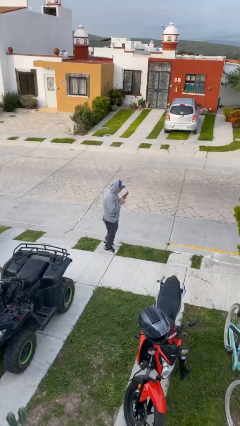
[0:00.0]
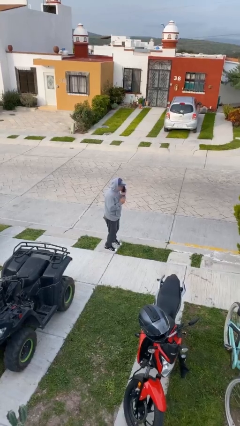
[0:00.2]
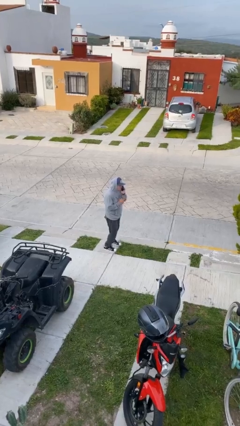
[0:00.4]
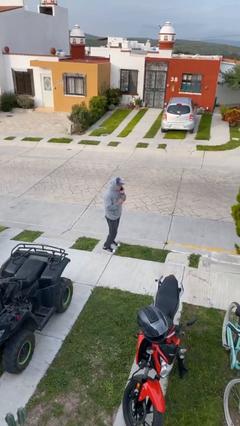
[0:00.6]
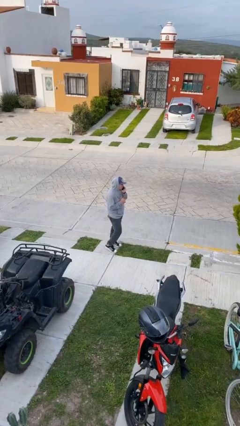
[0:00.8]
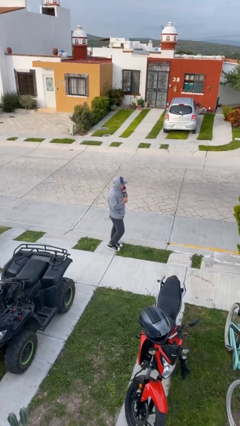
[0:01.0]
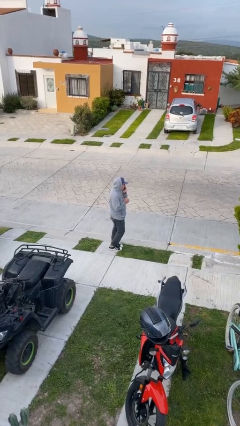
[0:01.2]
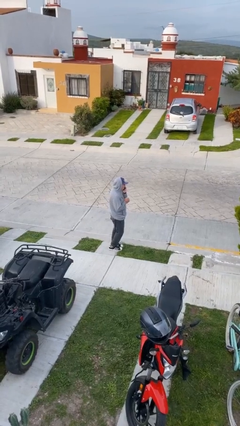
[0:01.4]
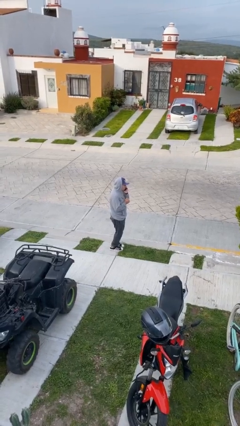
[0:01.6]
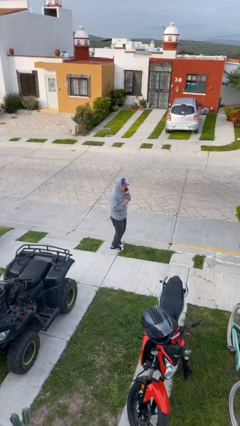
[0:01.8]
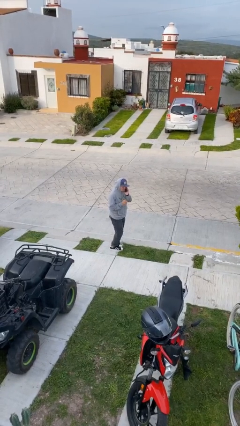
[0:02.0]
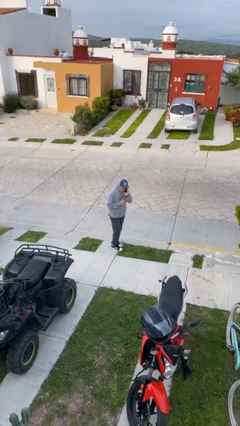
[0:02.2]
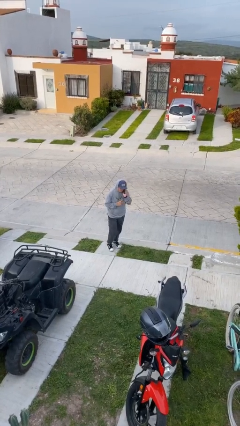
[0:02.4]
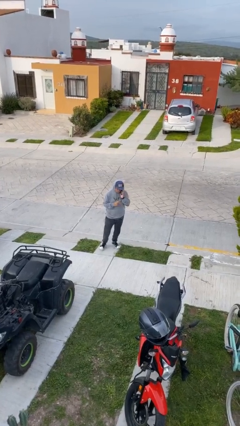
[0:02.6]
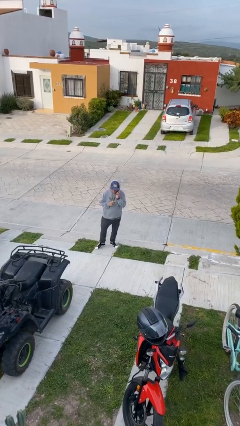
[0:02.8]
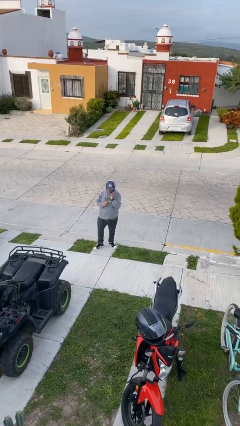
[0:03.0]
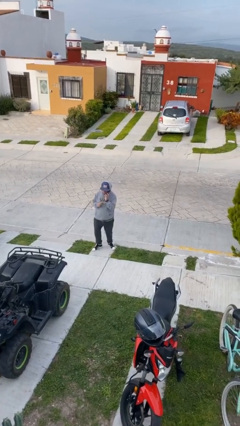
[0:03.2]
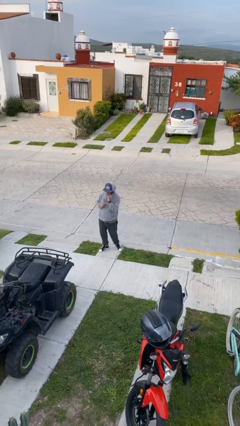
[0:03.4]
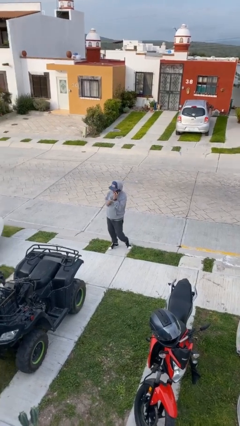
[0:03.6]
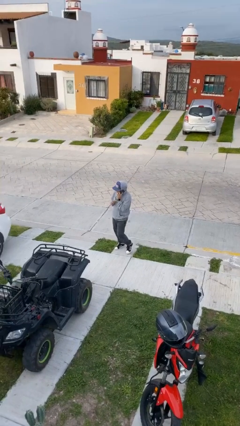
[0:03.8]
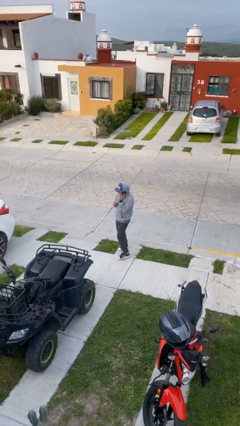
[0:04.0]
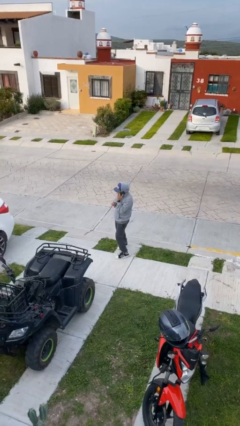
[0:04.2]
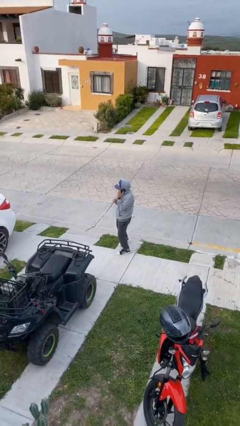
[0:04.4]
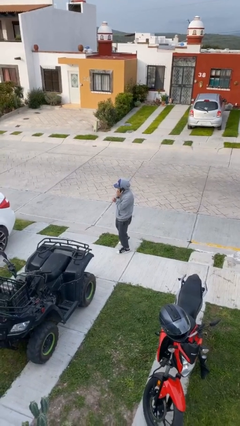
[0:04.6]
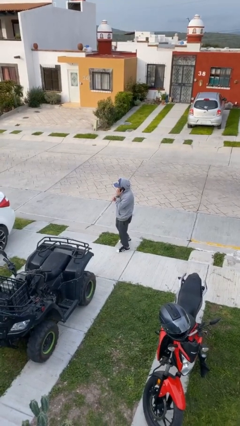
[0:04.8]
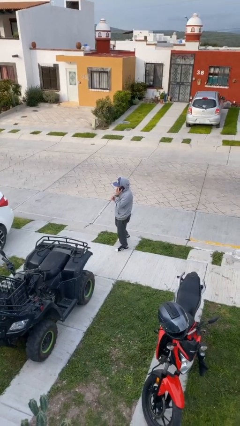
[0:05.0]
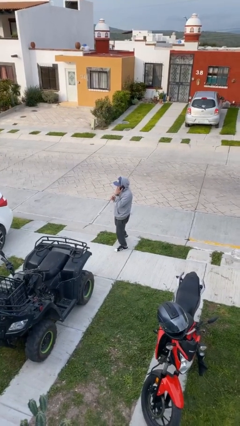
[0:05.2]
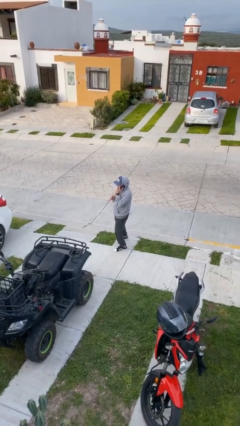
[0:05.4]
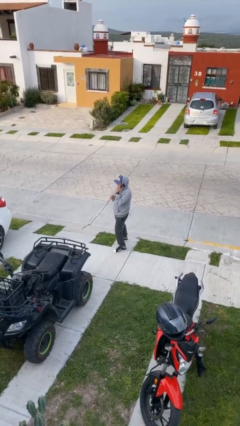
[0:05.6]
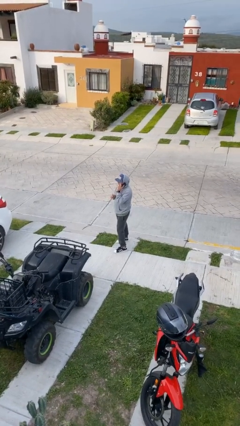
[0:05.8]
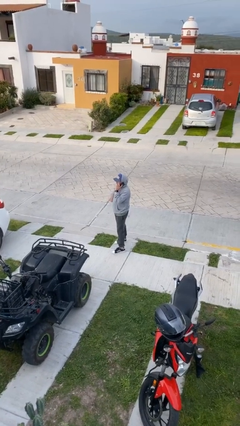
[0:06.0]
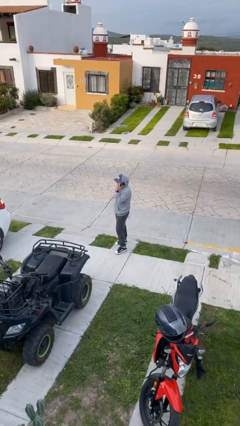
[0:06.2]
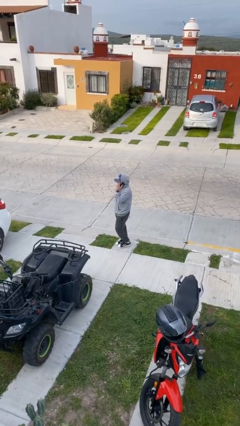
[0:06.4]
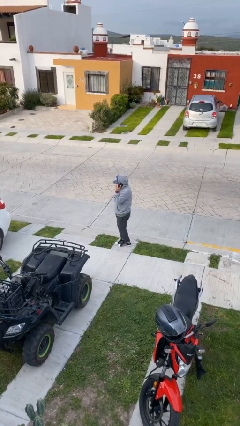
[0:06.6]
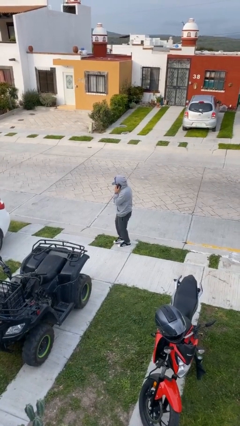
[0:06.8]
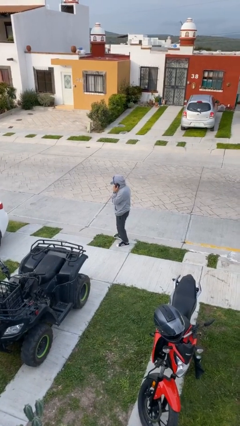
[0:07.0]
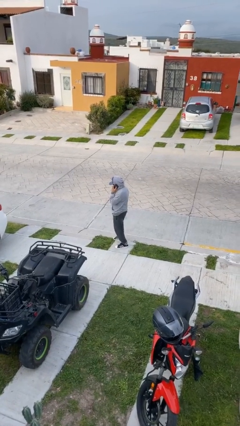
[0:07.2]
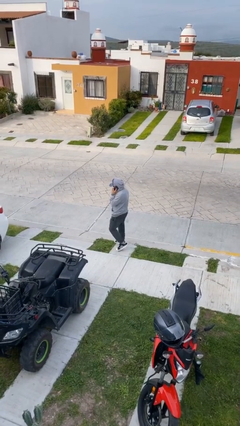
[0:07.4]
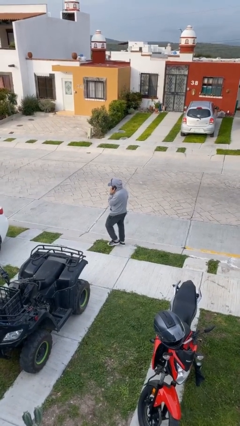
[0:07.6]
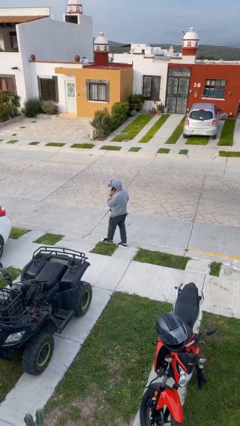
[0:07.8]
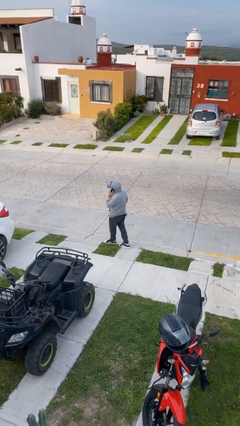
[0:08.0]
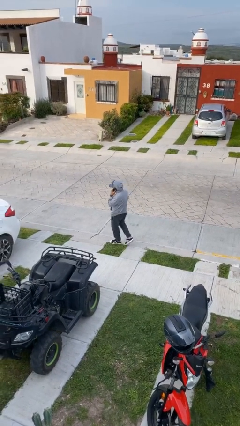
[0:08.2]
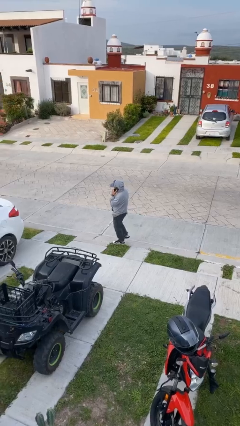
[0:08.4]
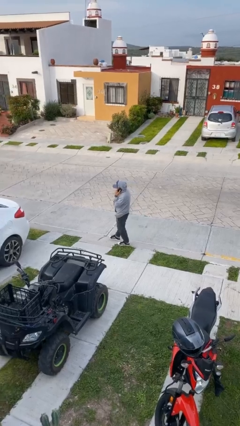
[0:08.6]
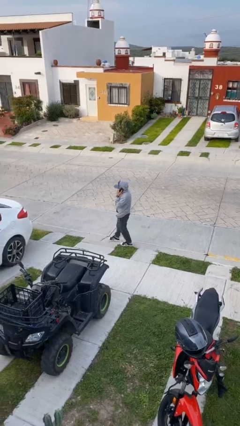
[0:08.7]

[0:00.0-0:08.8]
person talks on phone

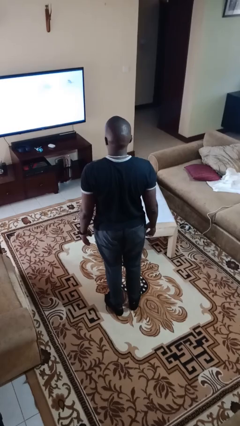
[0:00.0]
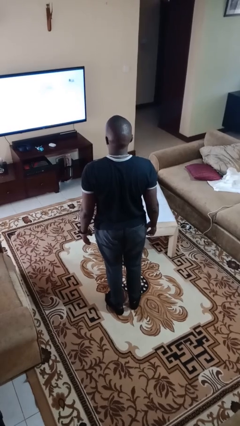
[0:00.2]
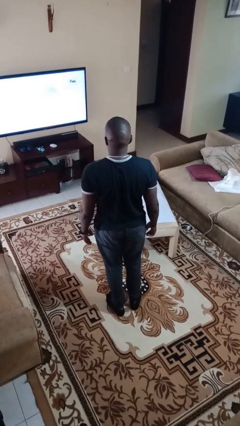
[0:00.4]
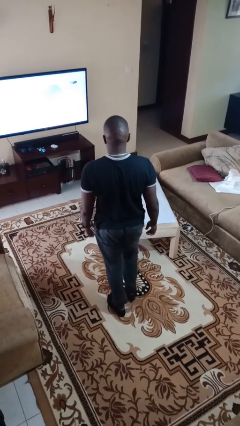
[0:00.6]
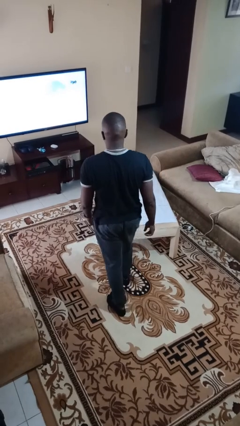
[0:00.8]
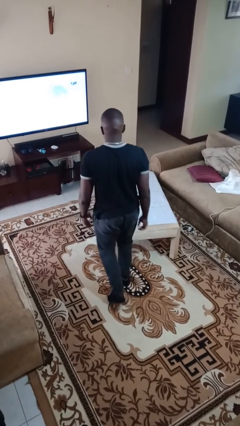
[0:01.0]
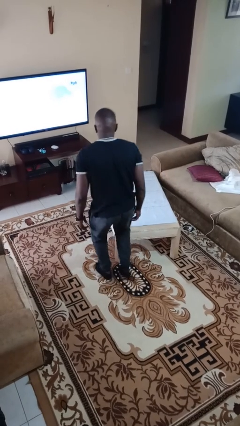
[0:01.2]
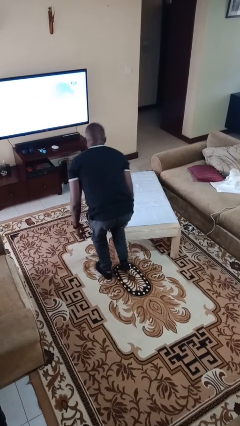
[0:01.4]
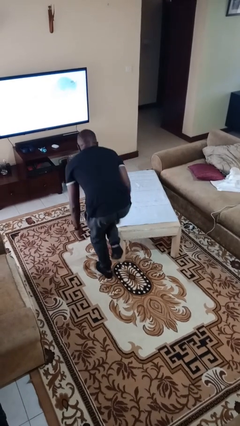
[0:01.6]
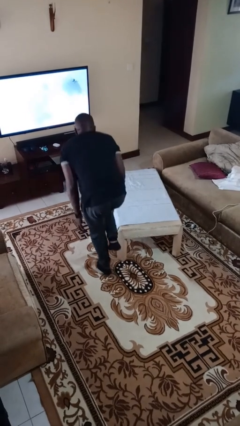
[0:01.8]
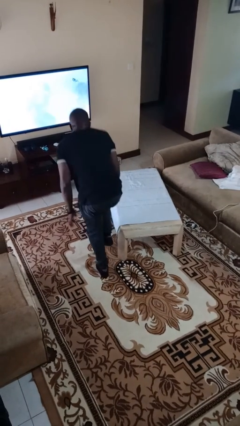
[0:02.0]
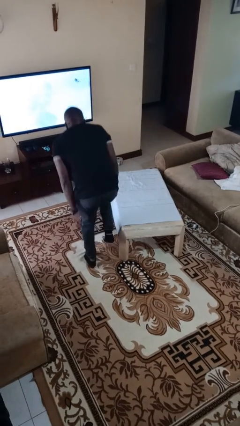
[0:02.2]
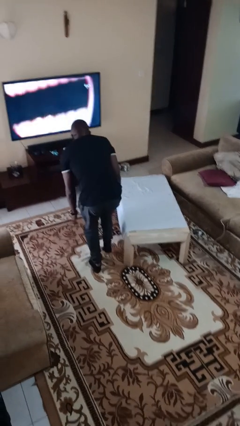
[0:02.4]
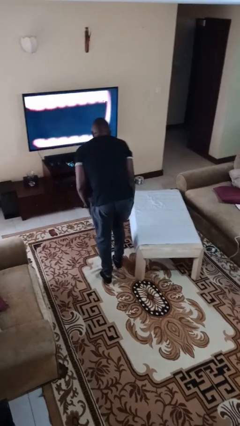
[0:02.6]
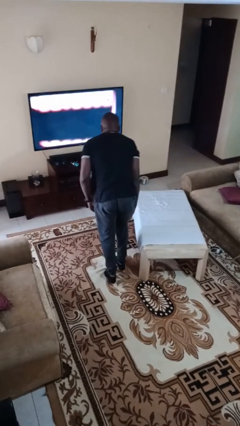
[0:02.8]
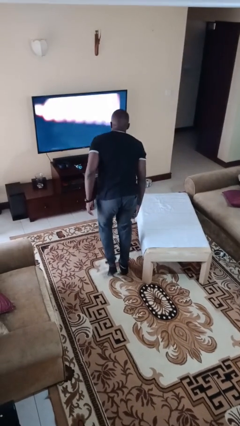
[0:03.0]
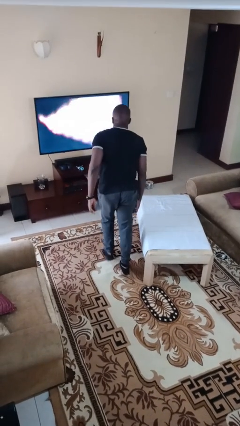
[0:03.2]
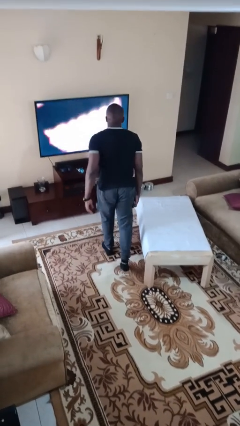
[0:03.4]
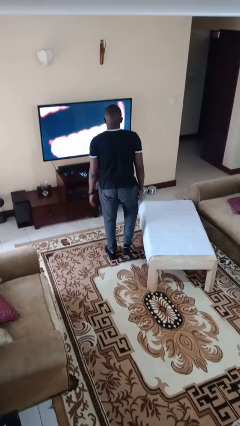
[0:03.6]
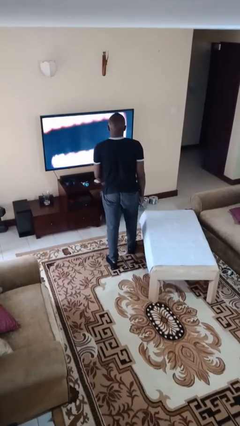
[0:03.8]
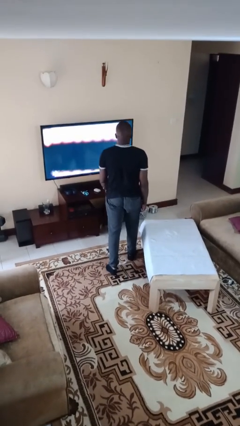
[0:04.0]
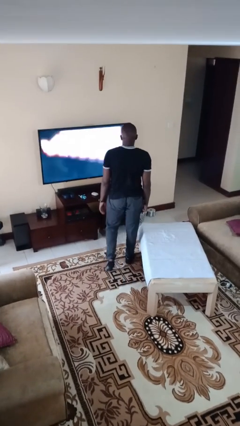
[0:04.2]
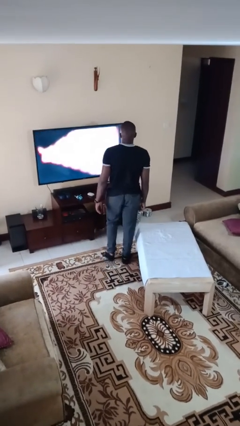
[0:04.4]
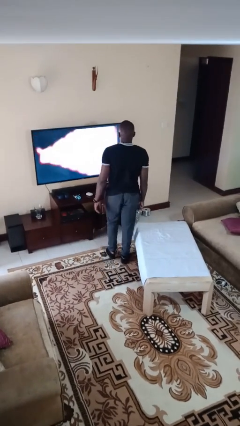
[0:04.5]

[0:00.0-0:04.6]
person bumps into table

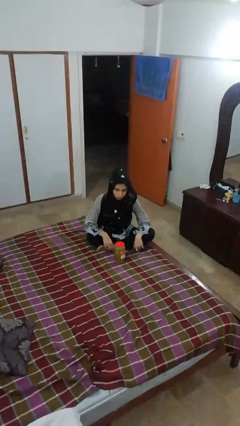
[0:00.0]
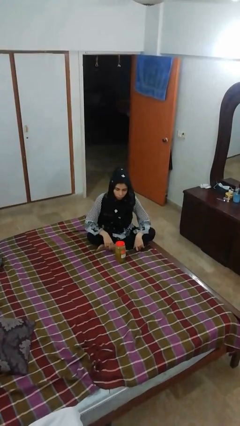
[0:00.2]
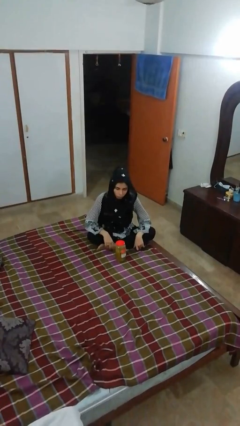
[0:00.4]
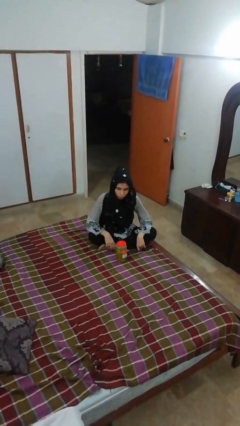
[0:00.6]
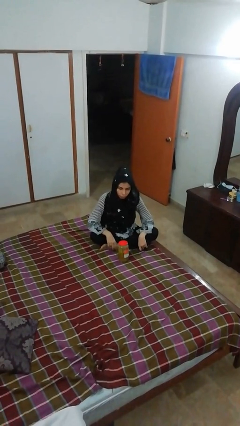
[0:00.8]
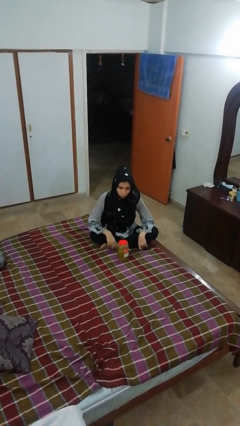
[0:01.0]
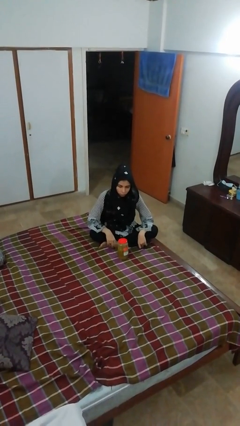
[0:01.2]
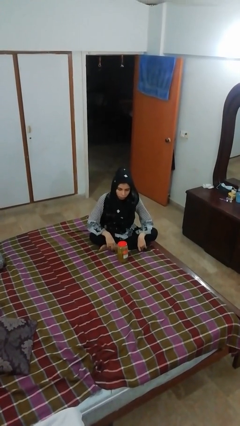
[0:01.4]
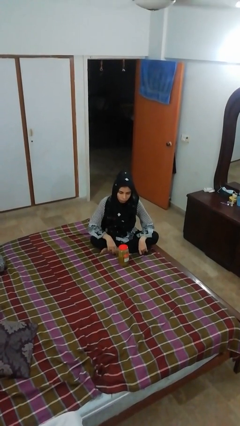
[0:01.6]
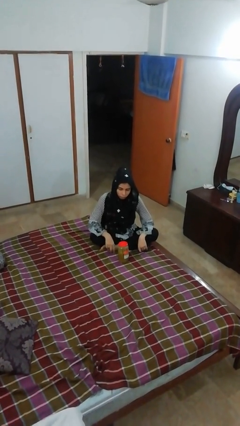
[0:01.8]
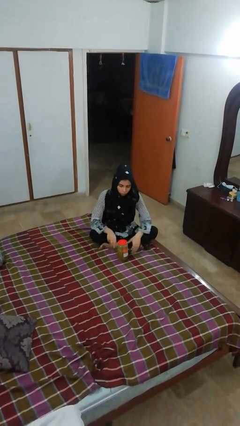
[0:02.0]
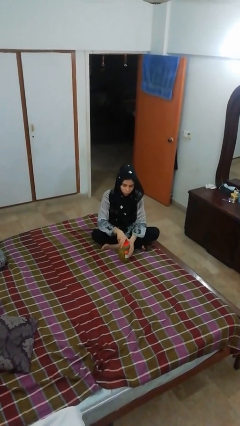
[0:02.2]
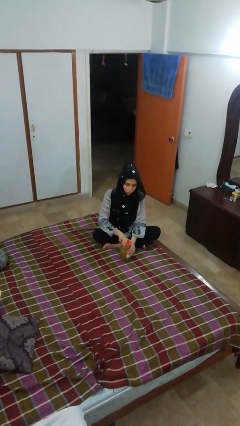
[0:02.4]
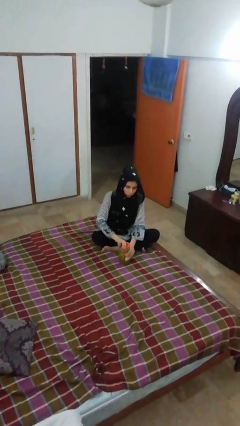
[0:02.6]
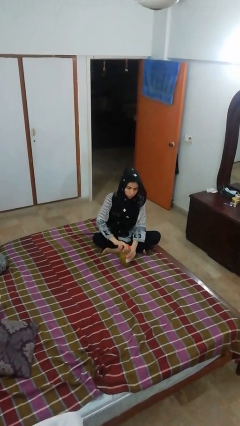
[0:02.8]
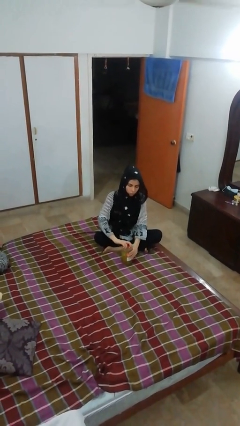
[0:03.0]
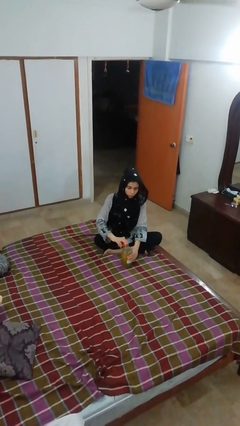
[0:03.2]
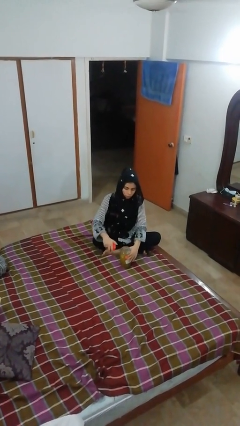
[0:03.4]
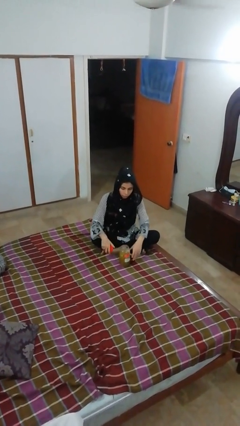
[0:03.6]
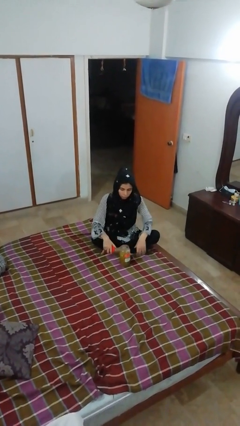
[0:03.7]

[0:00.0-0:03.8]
person opens jar

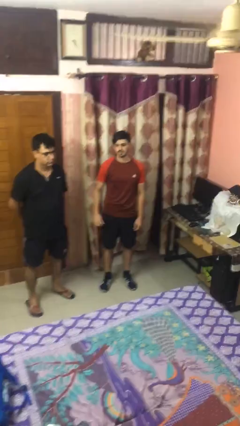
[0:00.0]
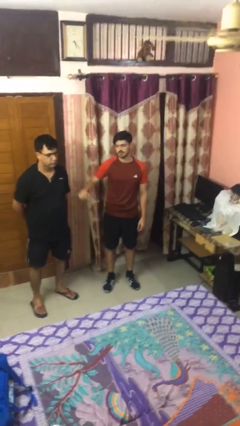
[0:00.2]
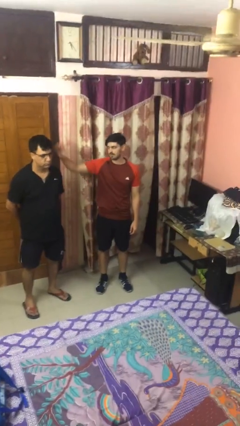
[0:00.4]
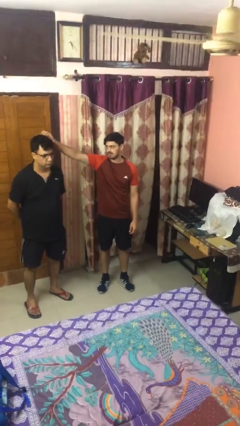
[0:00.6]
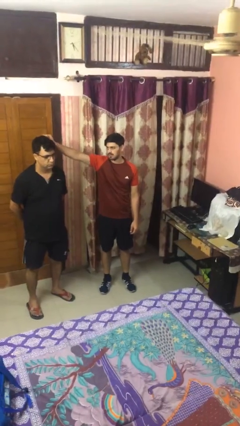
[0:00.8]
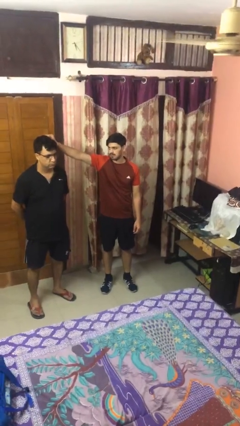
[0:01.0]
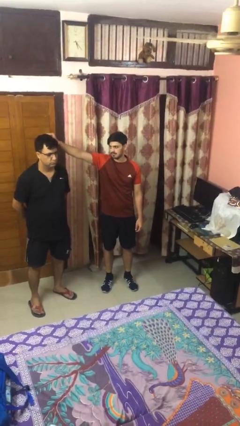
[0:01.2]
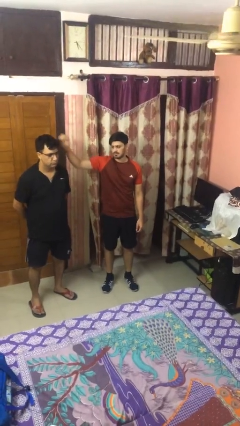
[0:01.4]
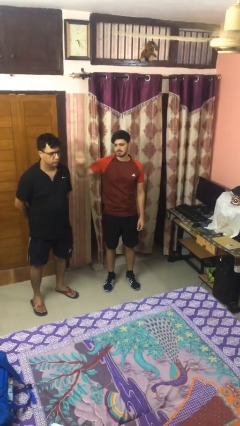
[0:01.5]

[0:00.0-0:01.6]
person grabs person by hair
